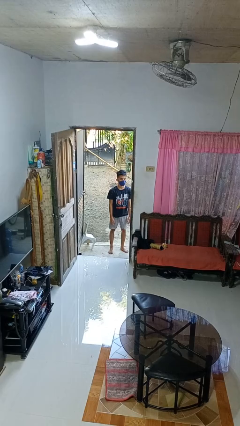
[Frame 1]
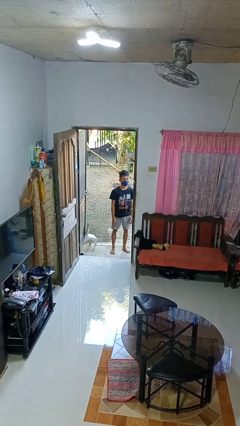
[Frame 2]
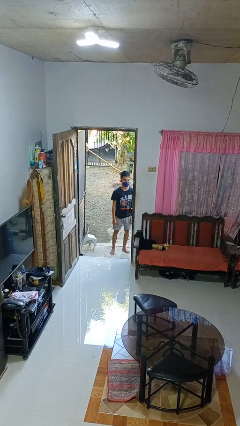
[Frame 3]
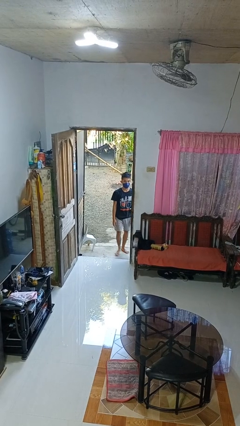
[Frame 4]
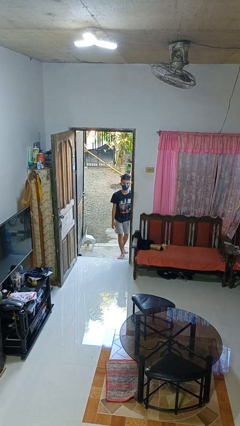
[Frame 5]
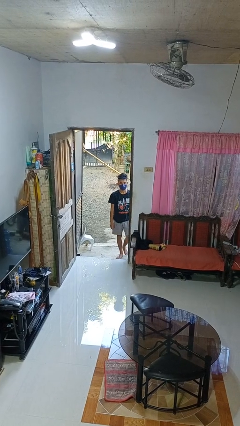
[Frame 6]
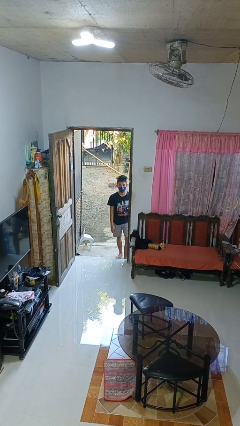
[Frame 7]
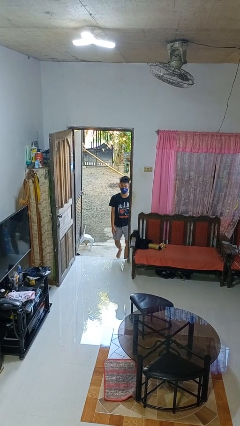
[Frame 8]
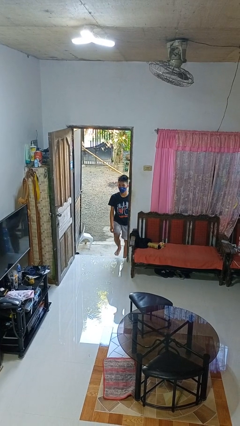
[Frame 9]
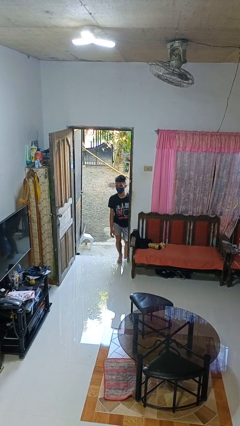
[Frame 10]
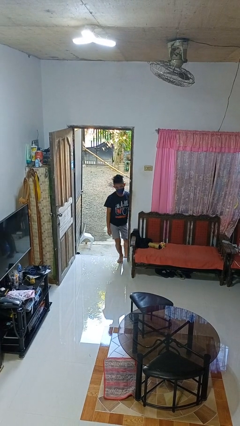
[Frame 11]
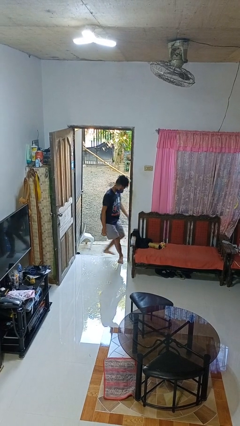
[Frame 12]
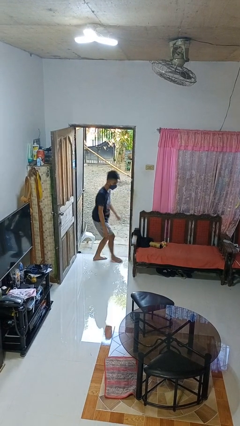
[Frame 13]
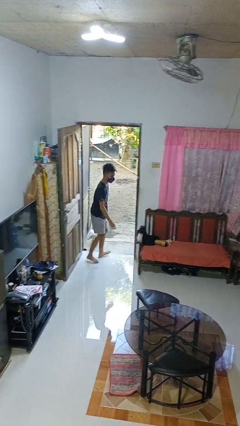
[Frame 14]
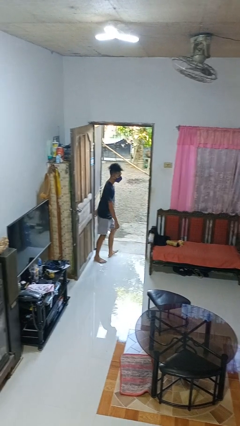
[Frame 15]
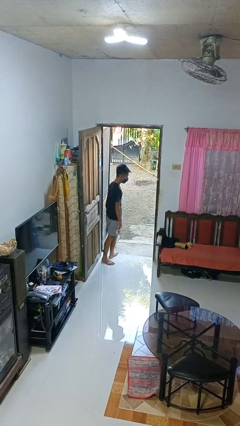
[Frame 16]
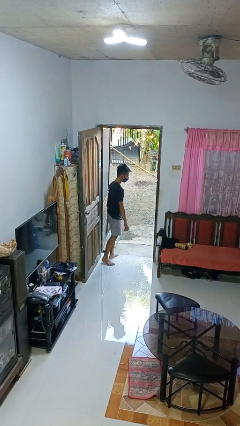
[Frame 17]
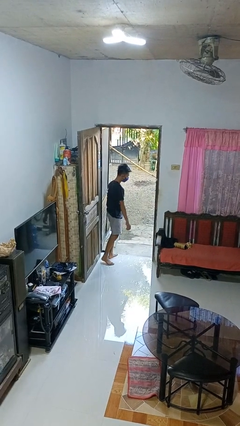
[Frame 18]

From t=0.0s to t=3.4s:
person bumps into wall

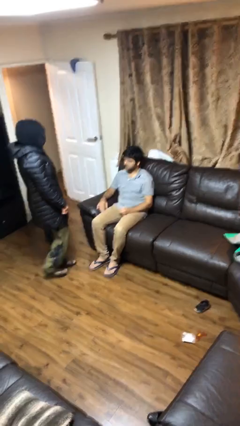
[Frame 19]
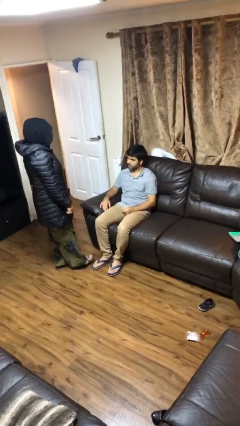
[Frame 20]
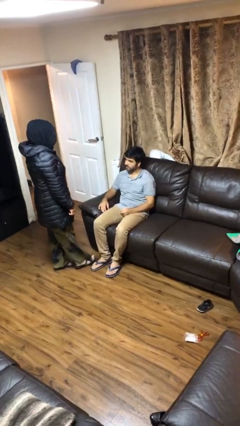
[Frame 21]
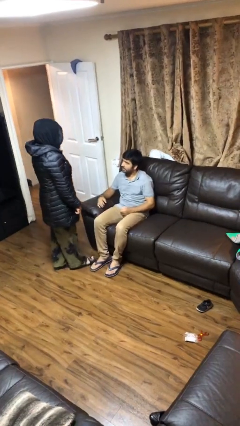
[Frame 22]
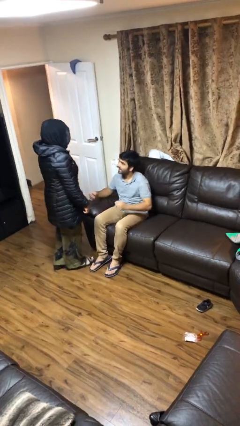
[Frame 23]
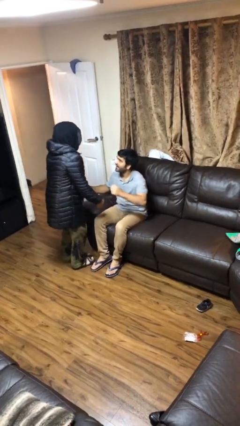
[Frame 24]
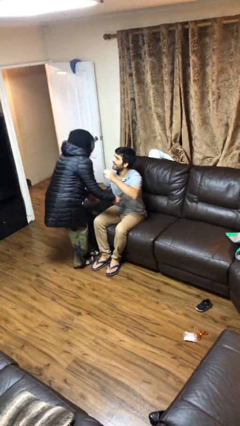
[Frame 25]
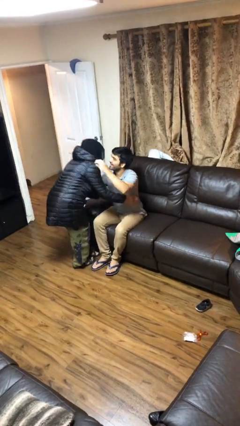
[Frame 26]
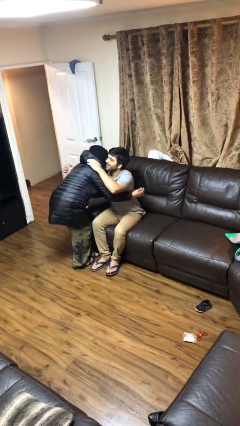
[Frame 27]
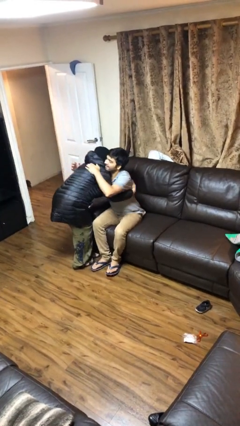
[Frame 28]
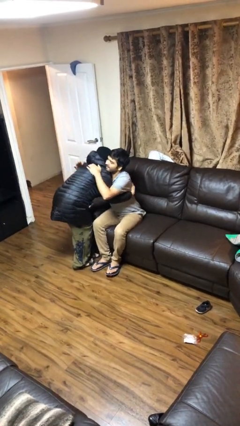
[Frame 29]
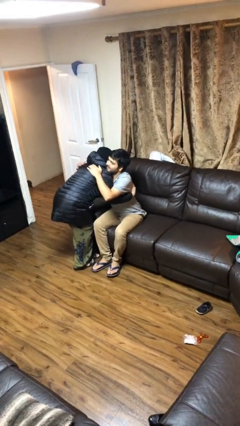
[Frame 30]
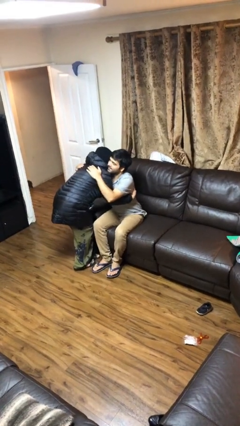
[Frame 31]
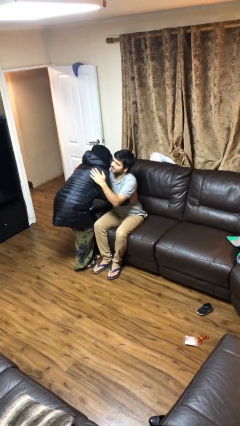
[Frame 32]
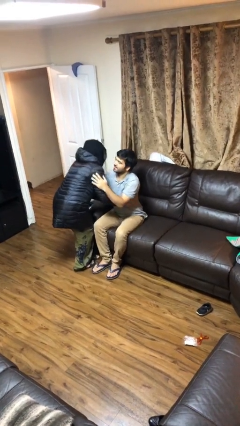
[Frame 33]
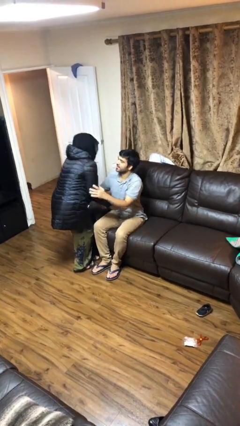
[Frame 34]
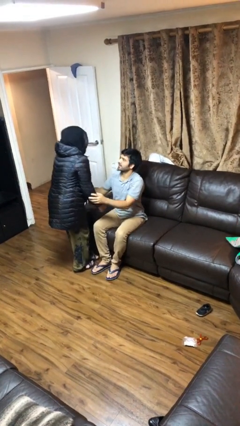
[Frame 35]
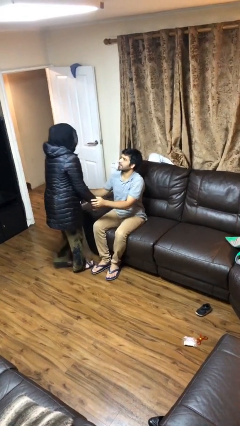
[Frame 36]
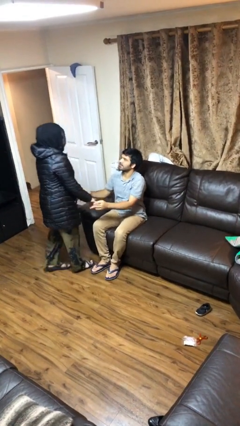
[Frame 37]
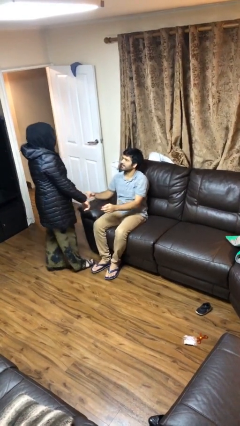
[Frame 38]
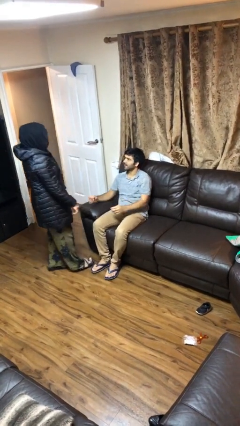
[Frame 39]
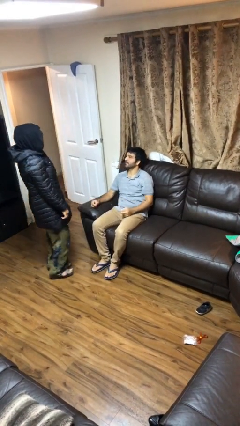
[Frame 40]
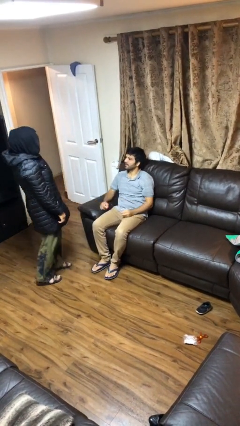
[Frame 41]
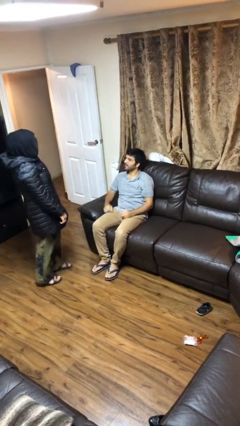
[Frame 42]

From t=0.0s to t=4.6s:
person embraces person

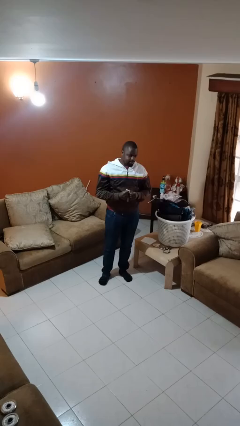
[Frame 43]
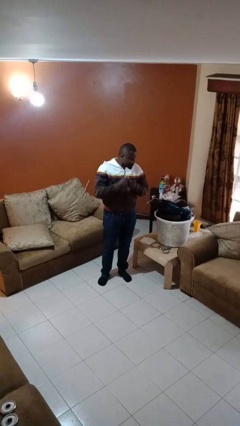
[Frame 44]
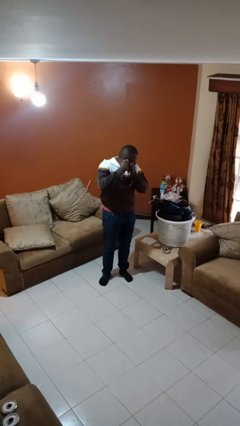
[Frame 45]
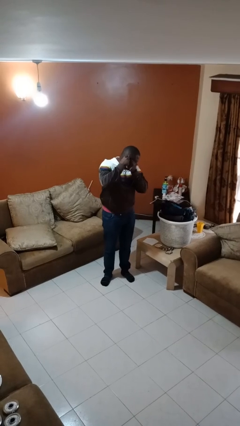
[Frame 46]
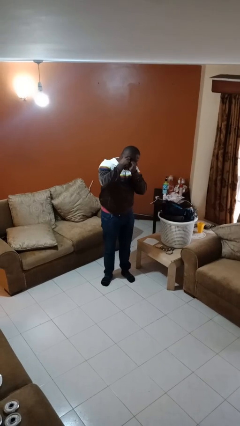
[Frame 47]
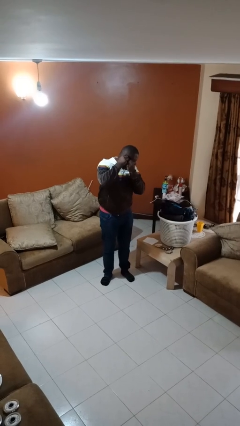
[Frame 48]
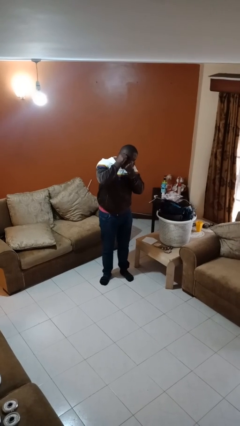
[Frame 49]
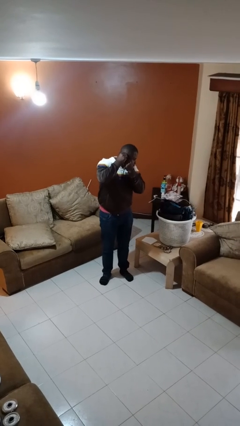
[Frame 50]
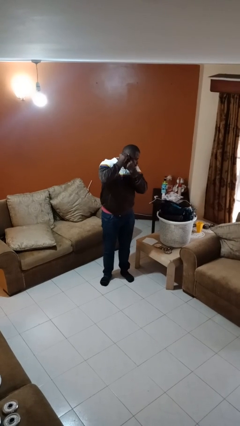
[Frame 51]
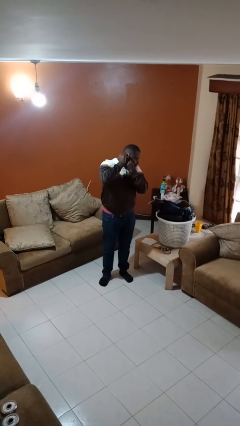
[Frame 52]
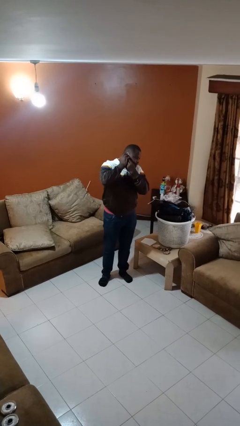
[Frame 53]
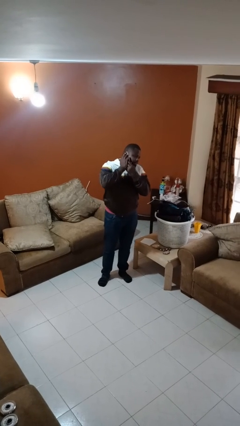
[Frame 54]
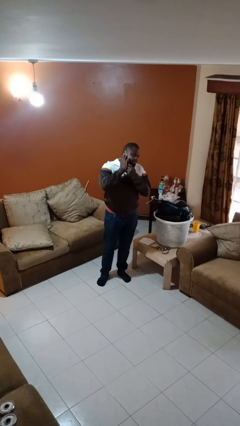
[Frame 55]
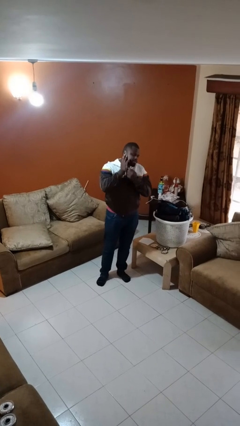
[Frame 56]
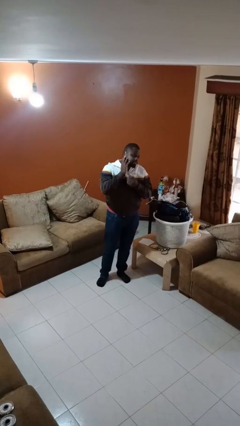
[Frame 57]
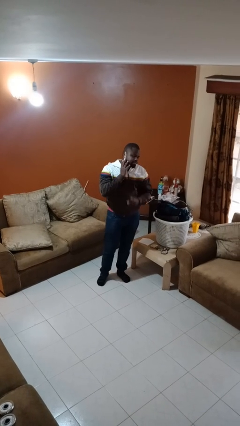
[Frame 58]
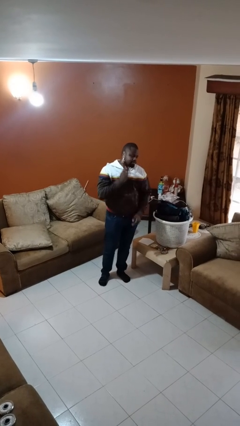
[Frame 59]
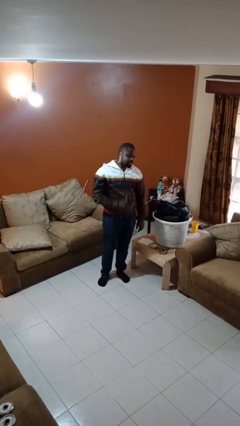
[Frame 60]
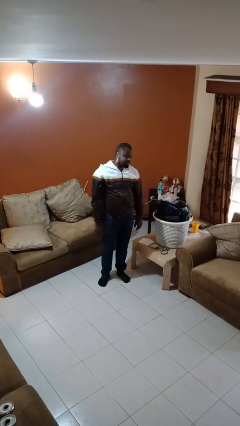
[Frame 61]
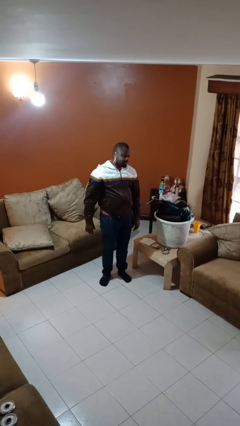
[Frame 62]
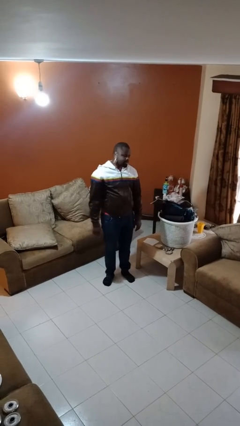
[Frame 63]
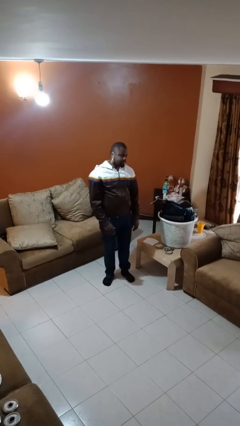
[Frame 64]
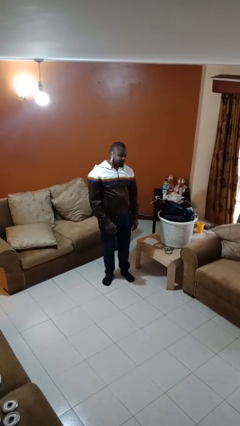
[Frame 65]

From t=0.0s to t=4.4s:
person puts on earrings

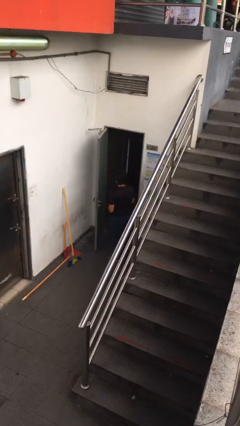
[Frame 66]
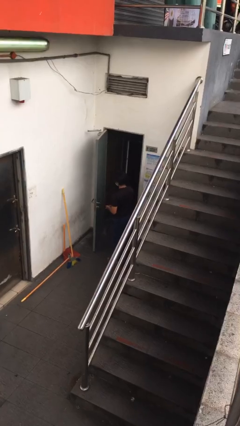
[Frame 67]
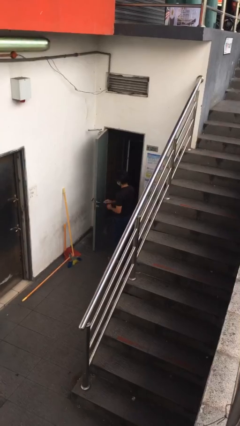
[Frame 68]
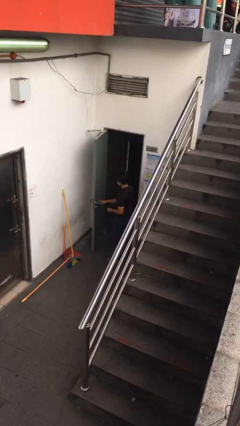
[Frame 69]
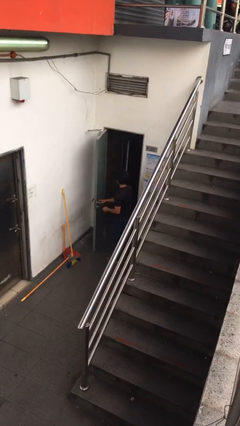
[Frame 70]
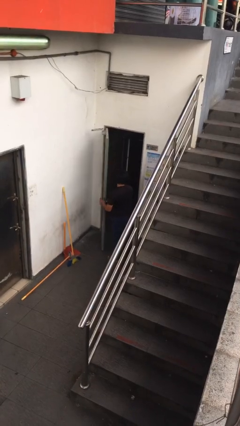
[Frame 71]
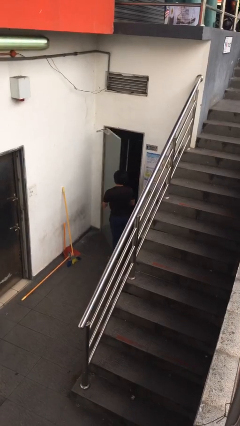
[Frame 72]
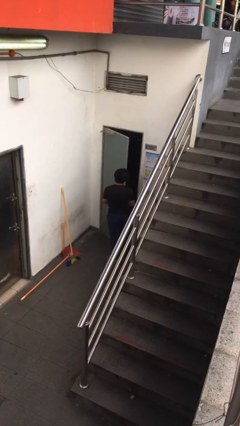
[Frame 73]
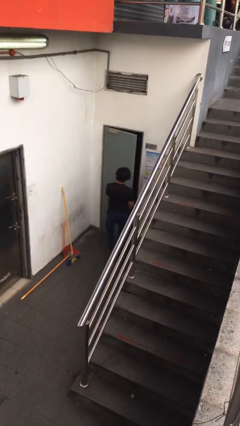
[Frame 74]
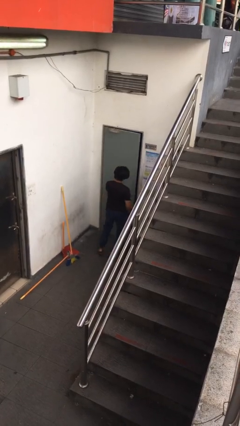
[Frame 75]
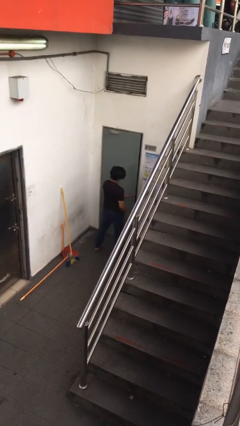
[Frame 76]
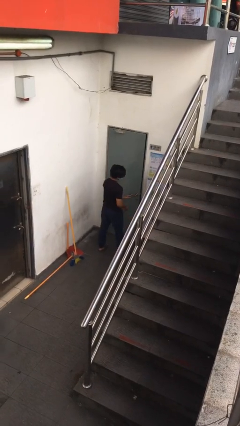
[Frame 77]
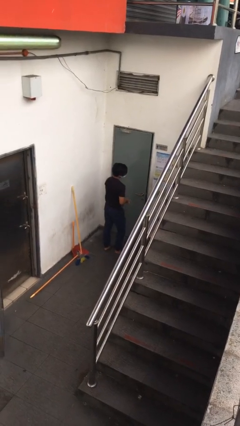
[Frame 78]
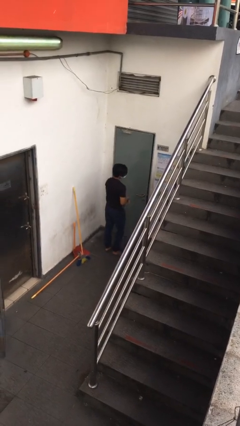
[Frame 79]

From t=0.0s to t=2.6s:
person closes facility door

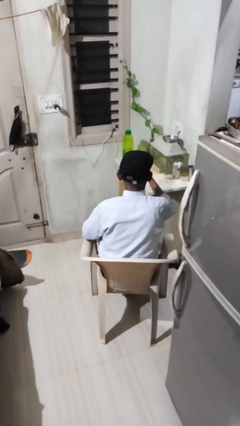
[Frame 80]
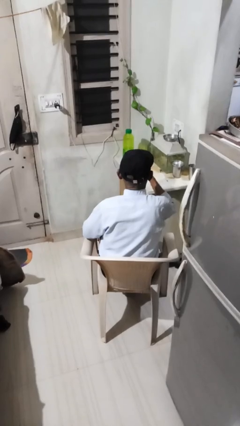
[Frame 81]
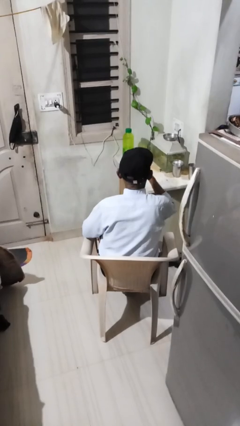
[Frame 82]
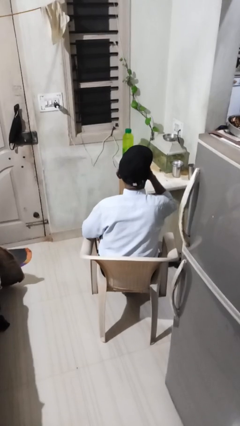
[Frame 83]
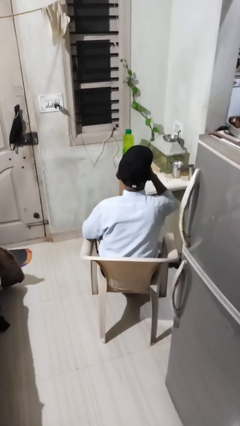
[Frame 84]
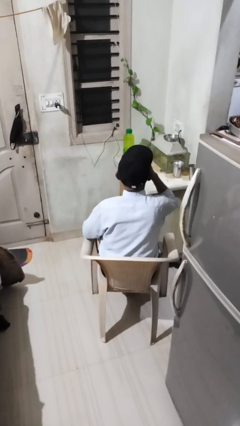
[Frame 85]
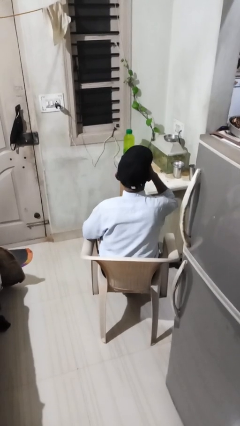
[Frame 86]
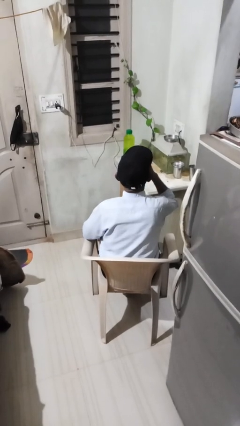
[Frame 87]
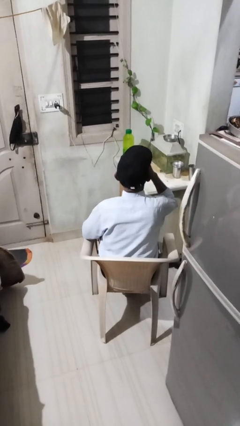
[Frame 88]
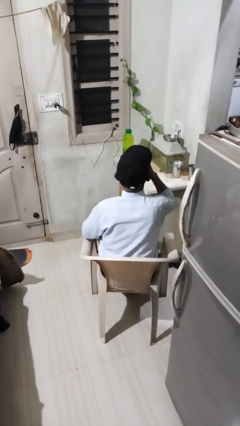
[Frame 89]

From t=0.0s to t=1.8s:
person drinks from mug

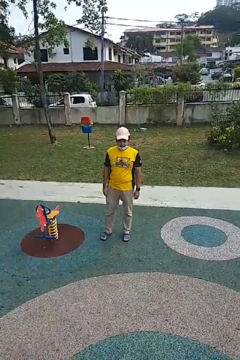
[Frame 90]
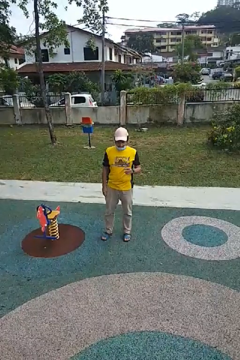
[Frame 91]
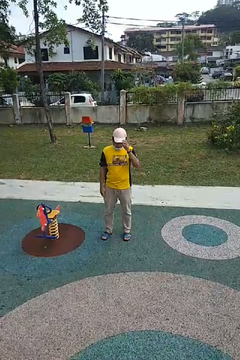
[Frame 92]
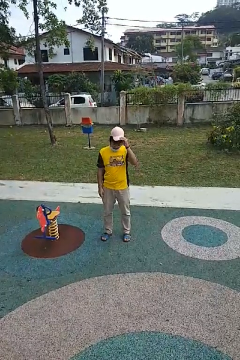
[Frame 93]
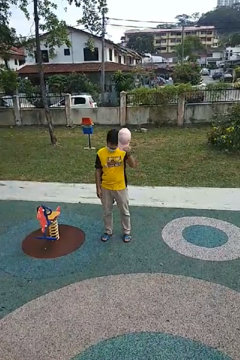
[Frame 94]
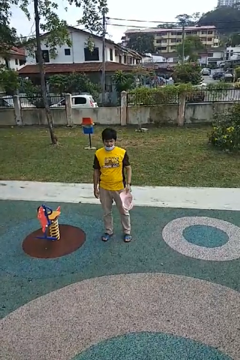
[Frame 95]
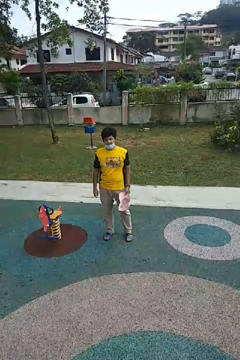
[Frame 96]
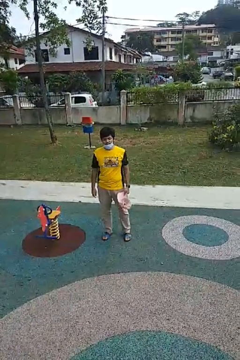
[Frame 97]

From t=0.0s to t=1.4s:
person takes off hat
